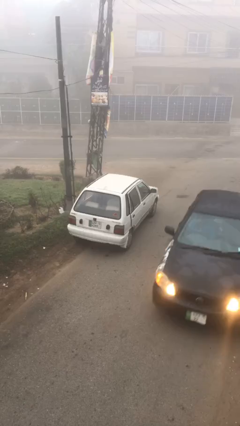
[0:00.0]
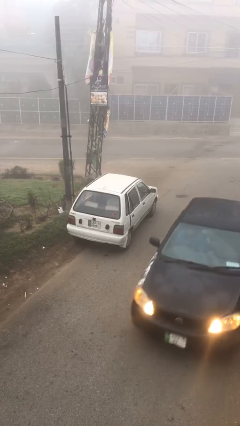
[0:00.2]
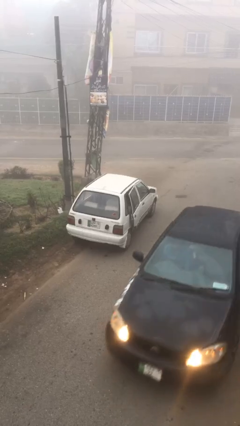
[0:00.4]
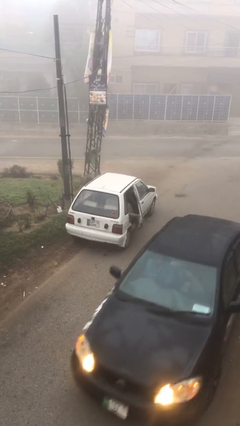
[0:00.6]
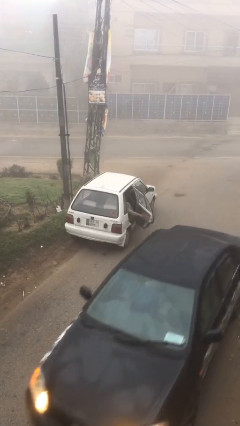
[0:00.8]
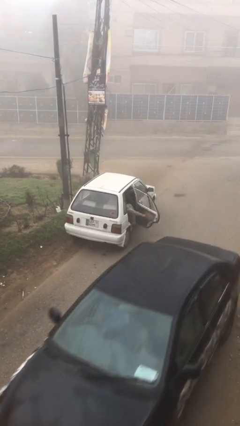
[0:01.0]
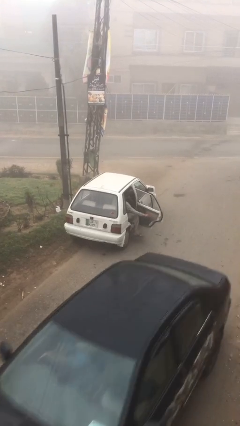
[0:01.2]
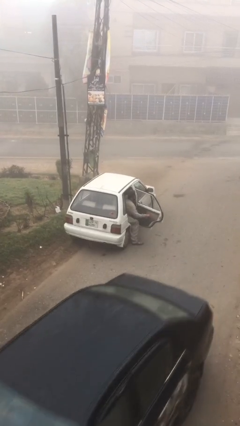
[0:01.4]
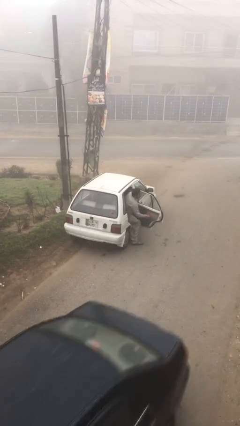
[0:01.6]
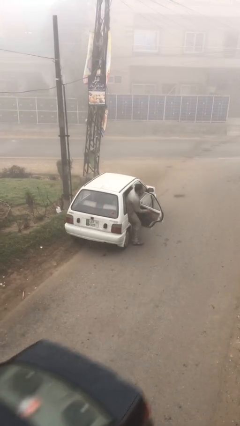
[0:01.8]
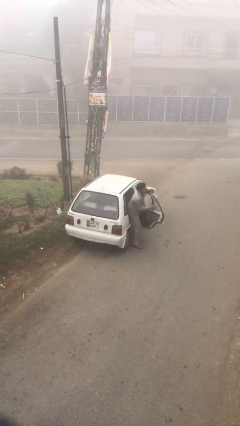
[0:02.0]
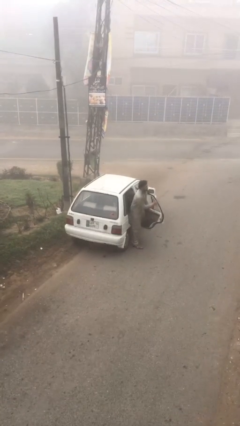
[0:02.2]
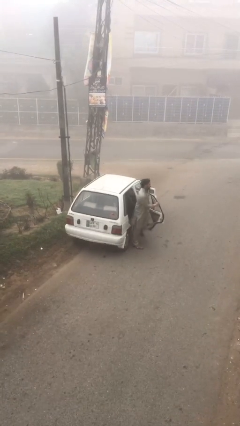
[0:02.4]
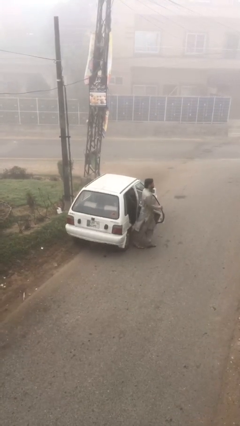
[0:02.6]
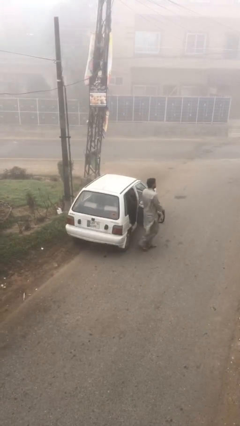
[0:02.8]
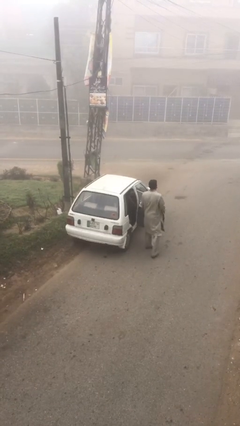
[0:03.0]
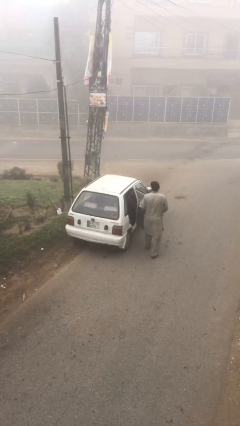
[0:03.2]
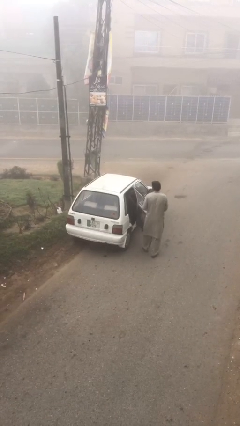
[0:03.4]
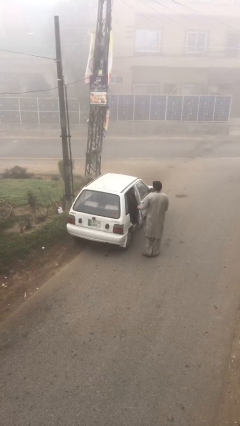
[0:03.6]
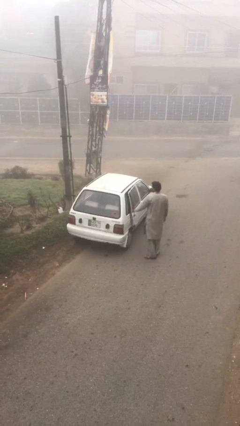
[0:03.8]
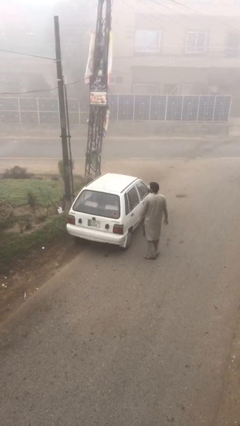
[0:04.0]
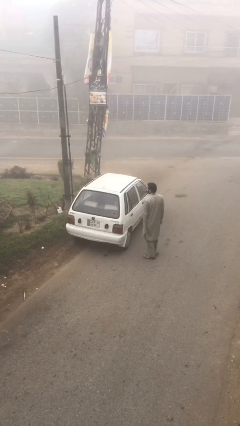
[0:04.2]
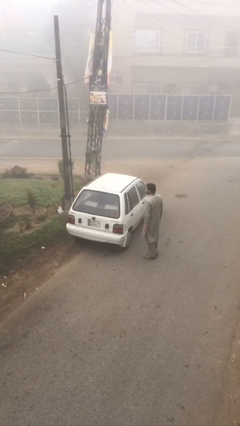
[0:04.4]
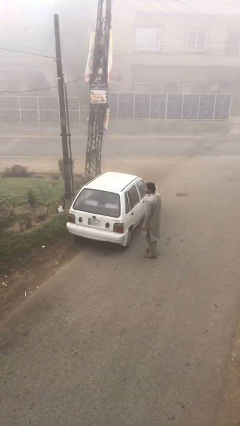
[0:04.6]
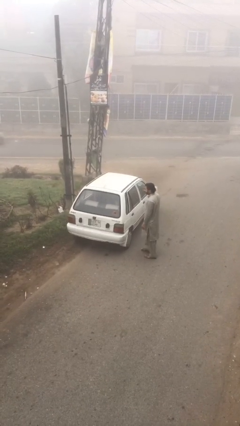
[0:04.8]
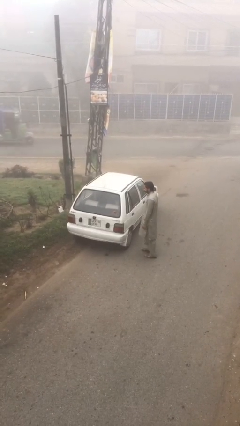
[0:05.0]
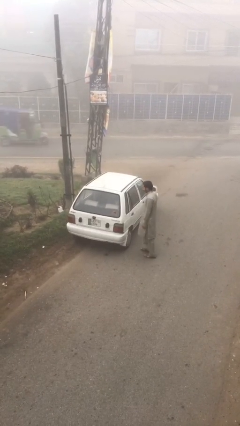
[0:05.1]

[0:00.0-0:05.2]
car drops off person

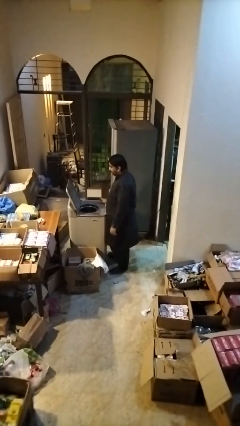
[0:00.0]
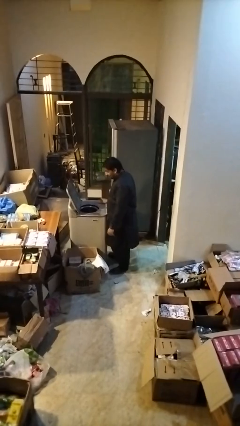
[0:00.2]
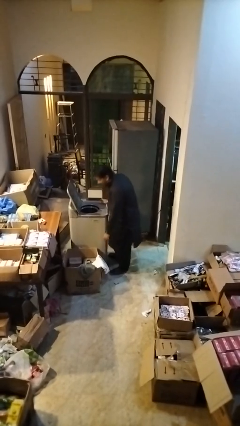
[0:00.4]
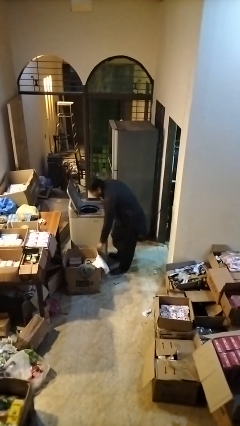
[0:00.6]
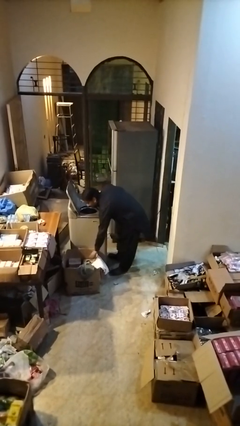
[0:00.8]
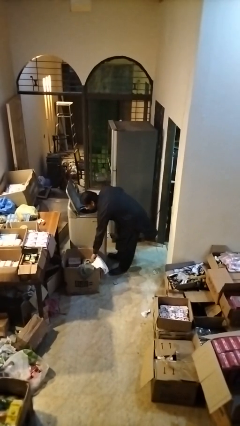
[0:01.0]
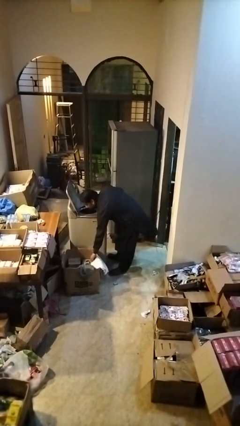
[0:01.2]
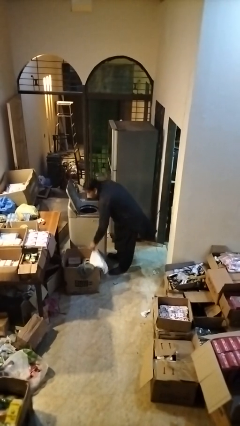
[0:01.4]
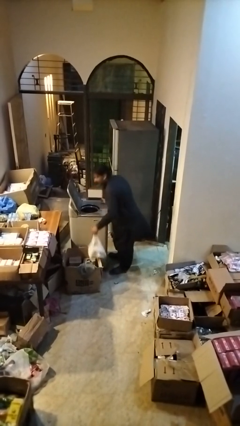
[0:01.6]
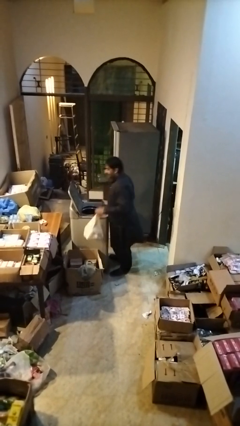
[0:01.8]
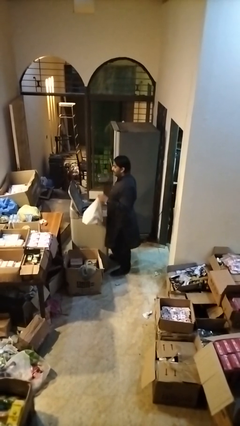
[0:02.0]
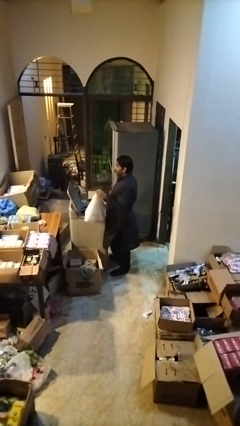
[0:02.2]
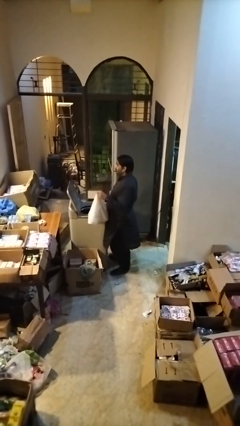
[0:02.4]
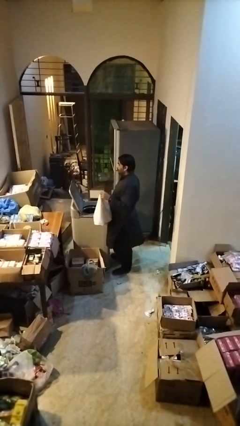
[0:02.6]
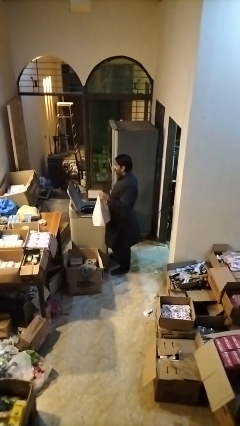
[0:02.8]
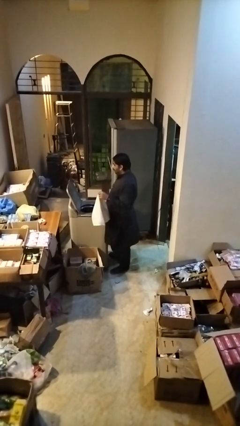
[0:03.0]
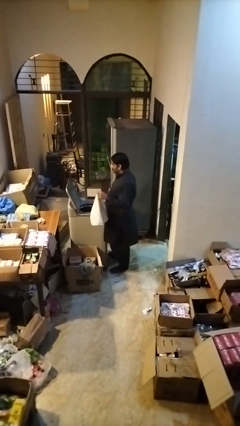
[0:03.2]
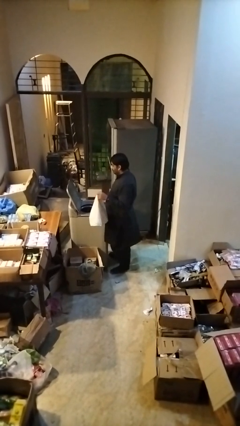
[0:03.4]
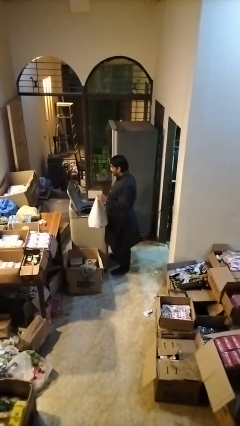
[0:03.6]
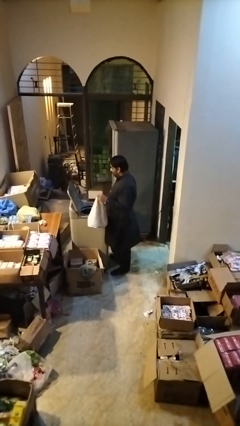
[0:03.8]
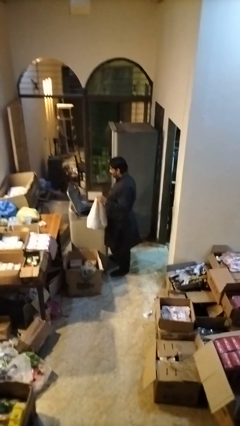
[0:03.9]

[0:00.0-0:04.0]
person unloads clotheswasher

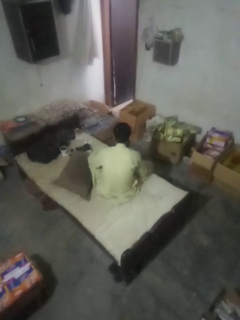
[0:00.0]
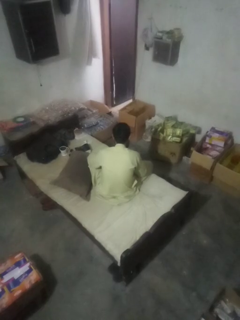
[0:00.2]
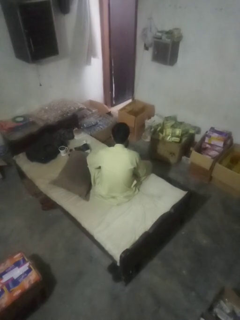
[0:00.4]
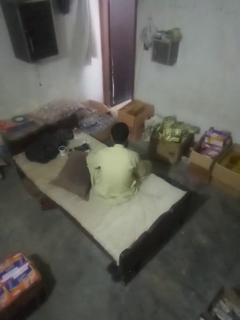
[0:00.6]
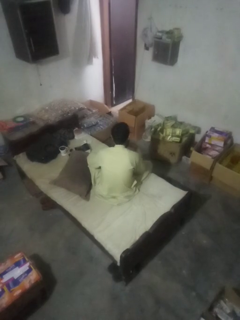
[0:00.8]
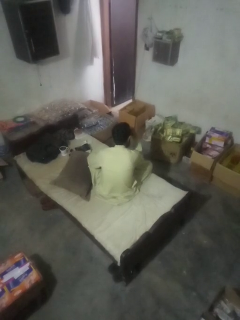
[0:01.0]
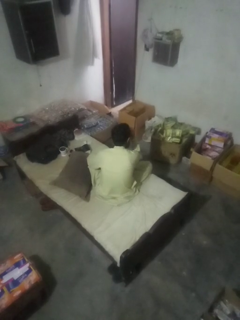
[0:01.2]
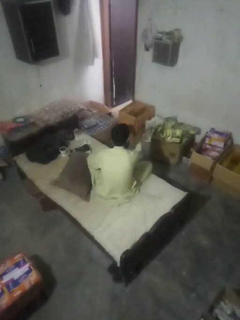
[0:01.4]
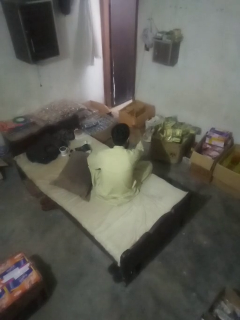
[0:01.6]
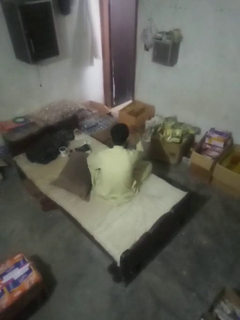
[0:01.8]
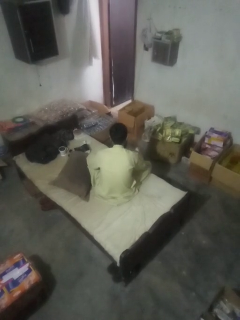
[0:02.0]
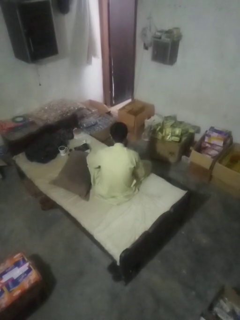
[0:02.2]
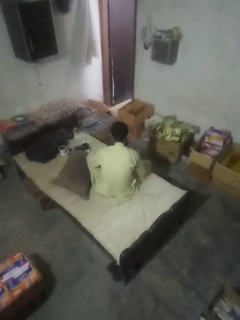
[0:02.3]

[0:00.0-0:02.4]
person gestures watch closely

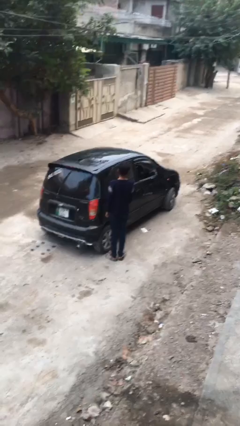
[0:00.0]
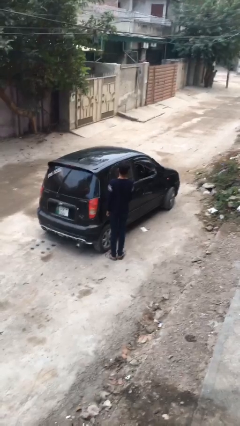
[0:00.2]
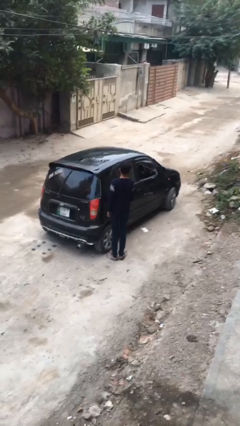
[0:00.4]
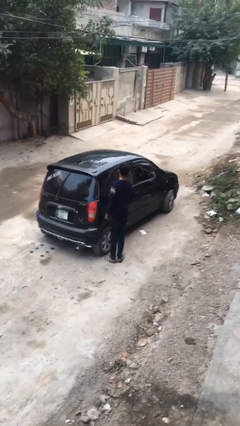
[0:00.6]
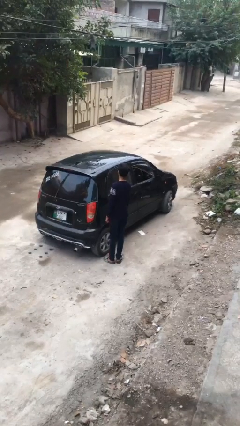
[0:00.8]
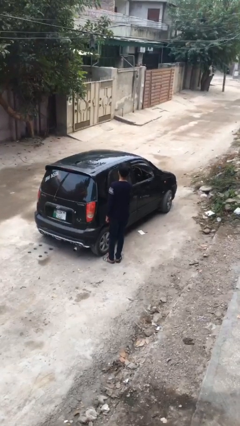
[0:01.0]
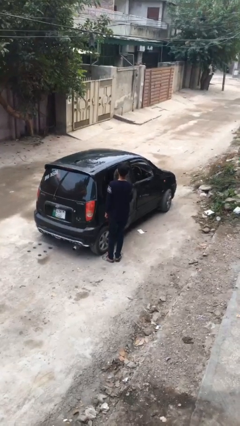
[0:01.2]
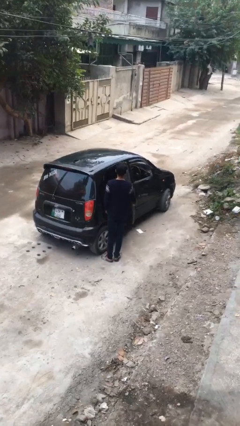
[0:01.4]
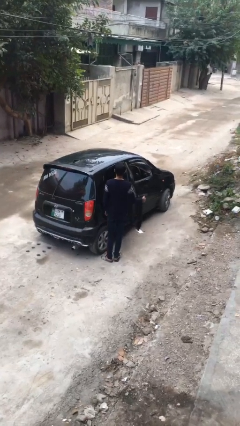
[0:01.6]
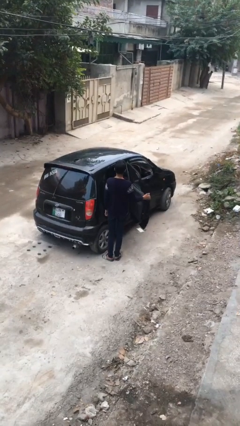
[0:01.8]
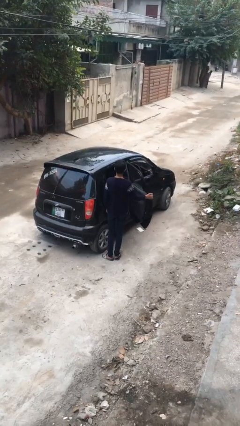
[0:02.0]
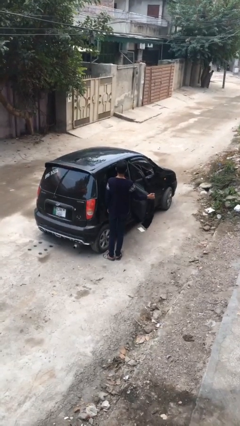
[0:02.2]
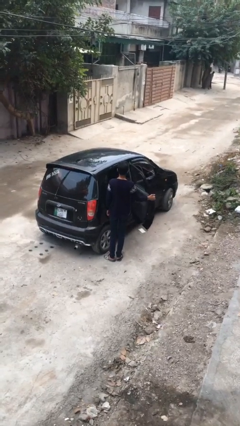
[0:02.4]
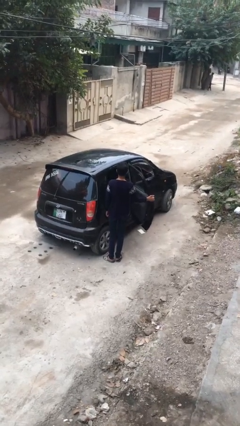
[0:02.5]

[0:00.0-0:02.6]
person opens car door

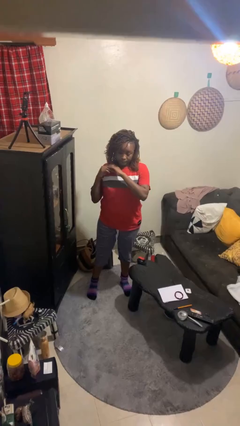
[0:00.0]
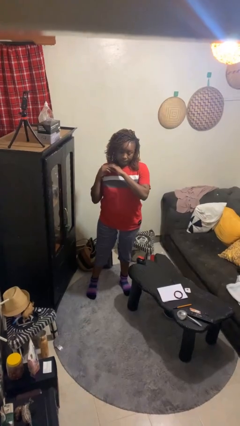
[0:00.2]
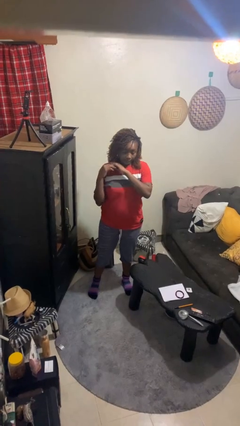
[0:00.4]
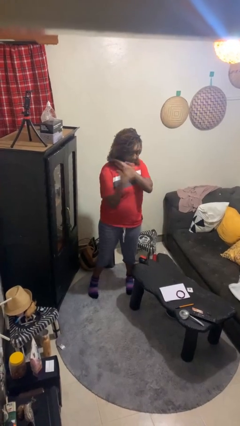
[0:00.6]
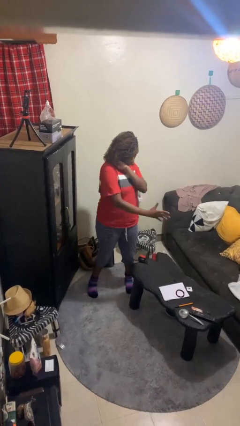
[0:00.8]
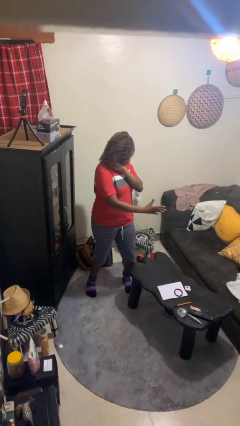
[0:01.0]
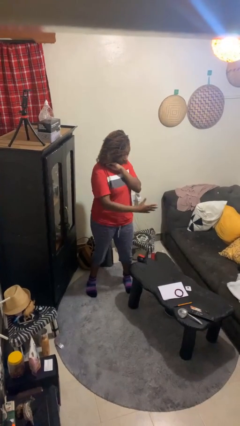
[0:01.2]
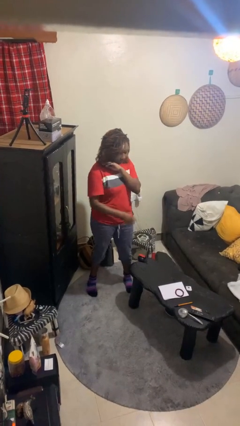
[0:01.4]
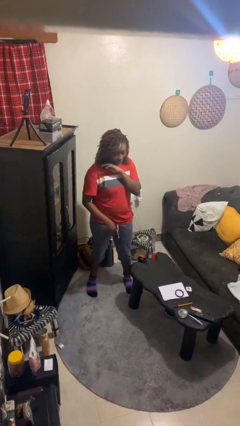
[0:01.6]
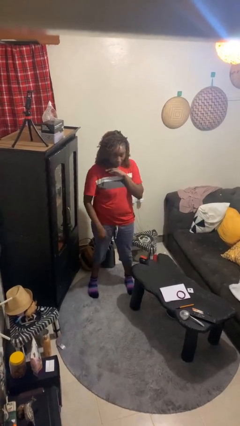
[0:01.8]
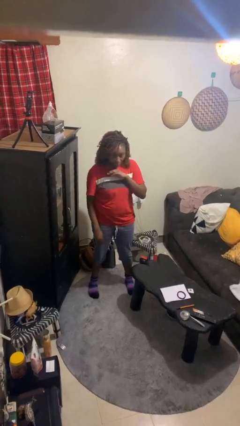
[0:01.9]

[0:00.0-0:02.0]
person karate chop

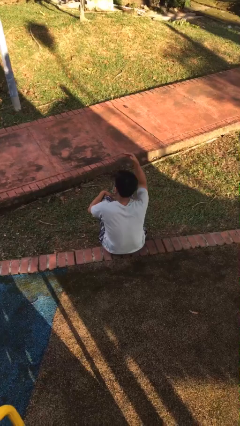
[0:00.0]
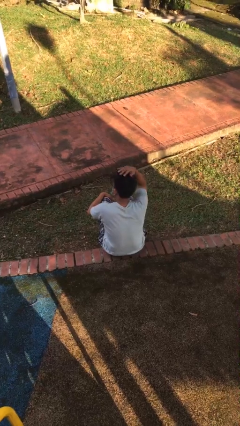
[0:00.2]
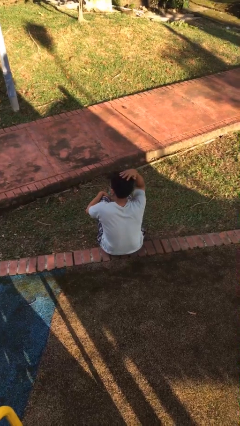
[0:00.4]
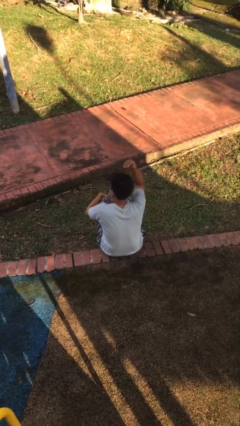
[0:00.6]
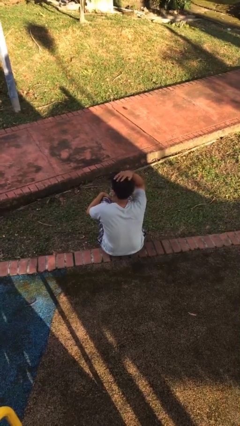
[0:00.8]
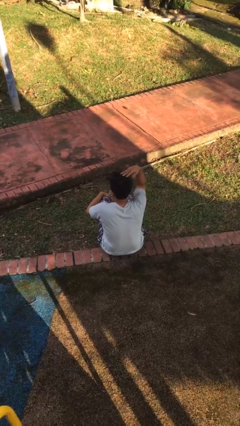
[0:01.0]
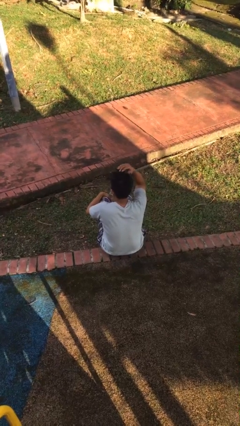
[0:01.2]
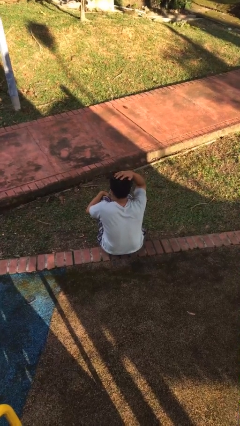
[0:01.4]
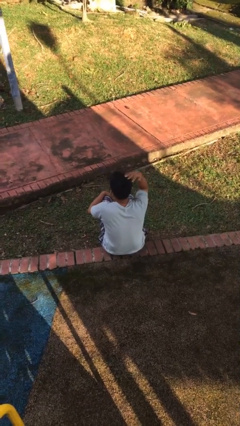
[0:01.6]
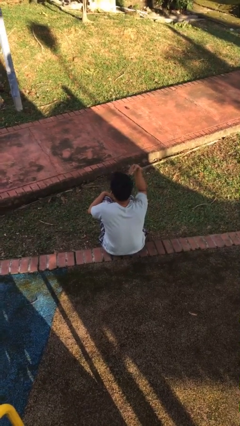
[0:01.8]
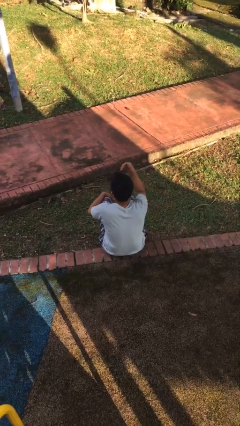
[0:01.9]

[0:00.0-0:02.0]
person pats head
